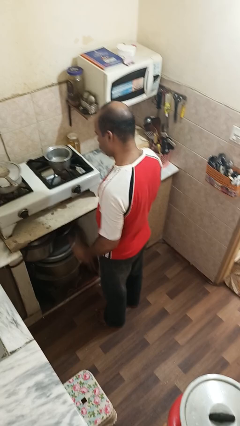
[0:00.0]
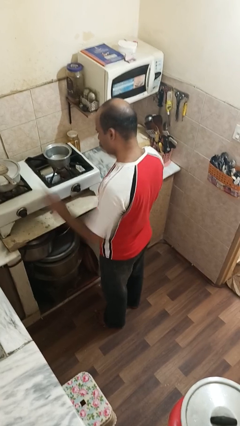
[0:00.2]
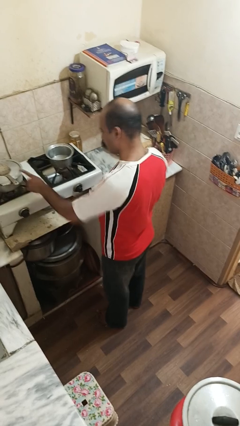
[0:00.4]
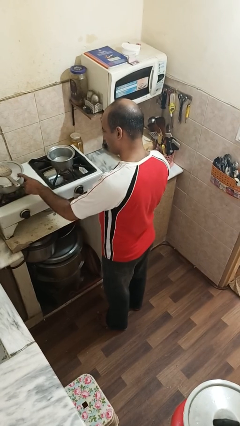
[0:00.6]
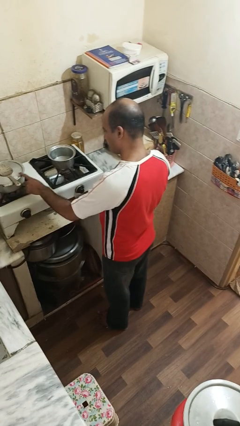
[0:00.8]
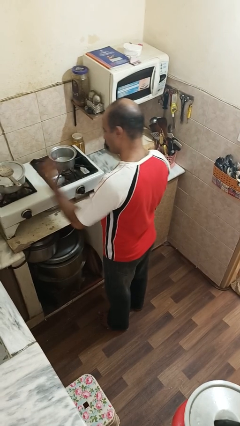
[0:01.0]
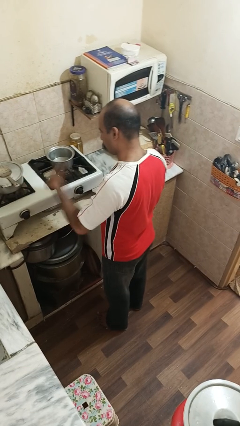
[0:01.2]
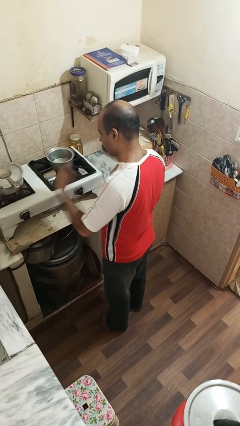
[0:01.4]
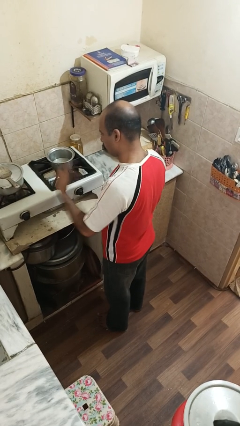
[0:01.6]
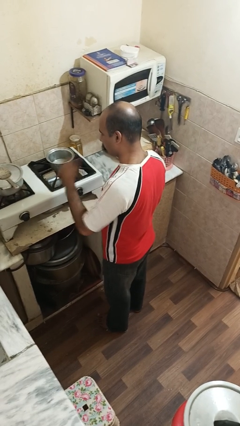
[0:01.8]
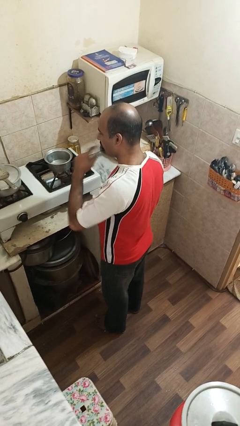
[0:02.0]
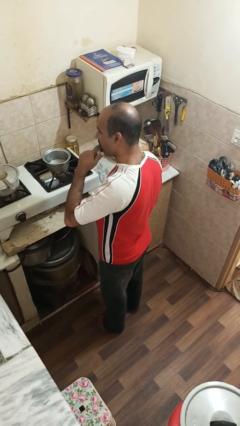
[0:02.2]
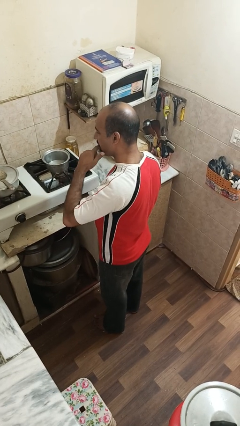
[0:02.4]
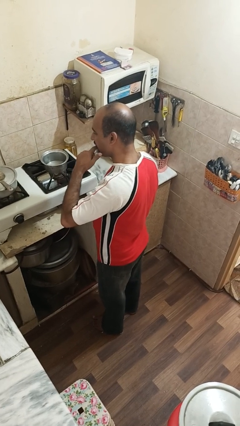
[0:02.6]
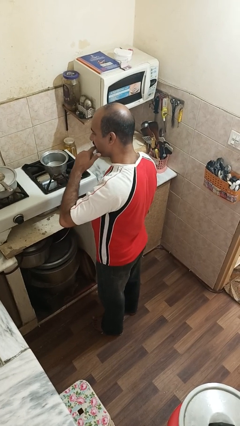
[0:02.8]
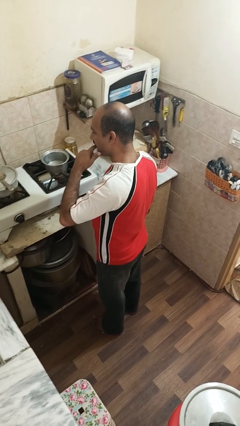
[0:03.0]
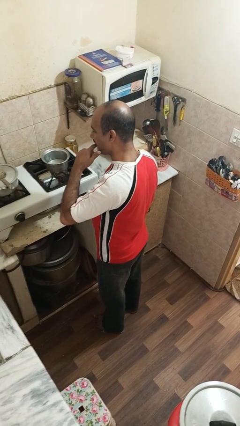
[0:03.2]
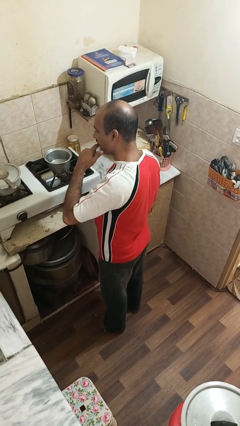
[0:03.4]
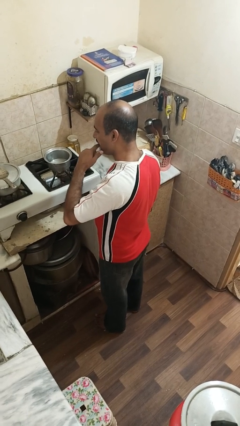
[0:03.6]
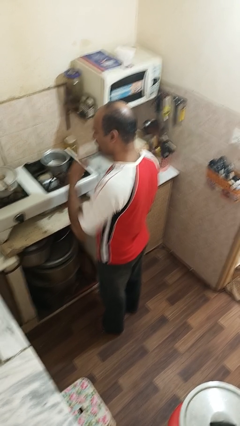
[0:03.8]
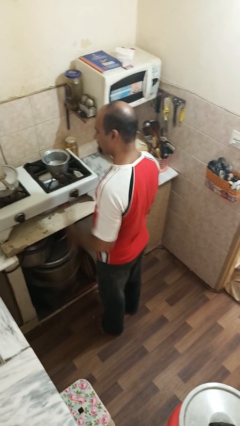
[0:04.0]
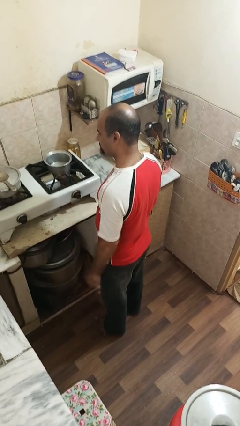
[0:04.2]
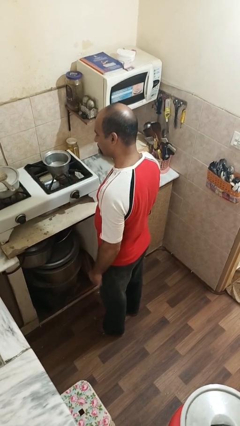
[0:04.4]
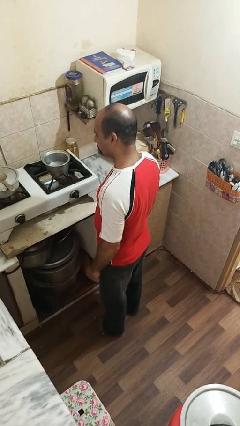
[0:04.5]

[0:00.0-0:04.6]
person burns hand

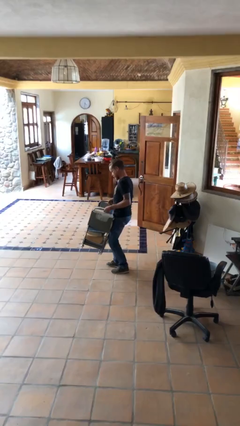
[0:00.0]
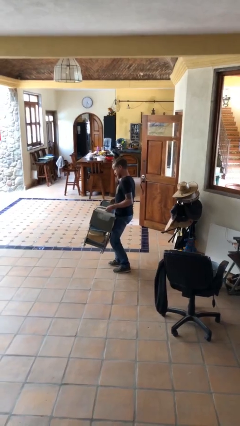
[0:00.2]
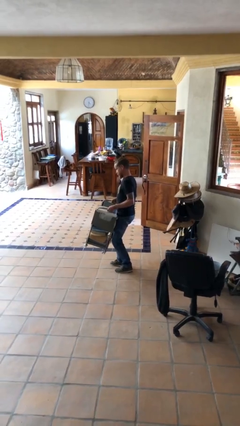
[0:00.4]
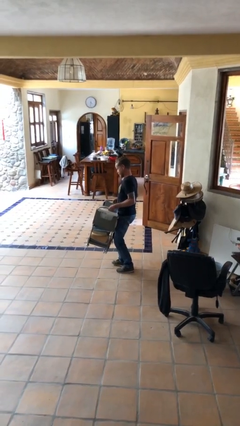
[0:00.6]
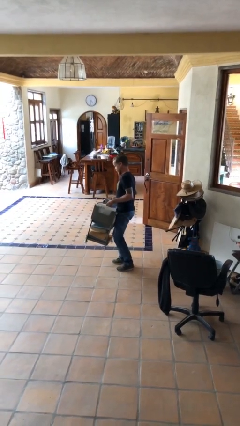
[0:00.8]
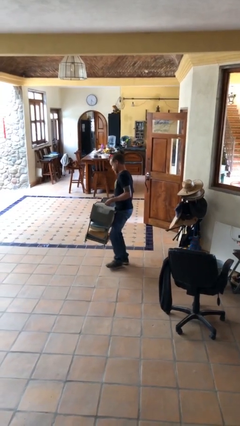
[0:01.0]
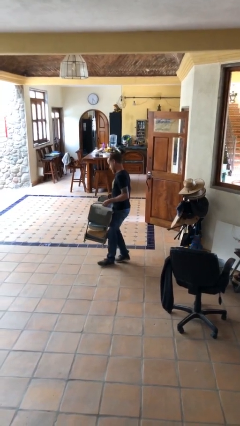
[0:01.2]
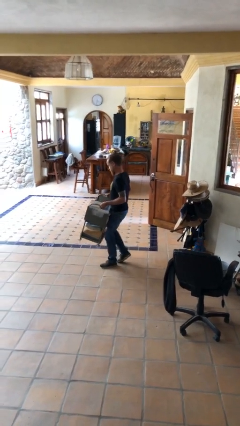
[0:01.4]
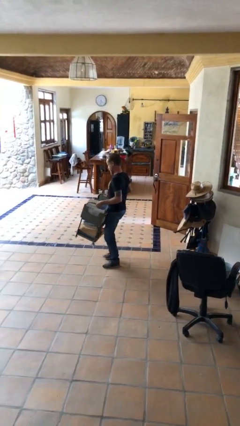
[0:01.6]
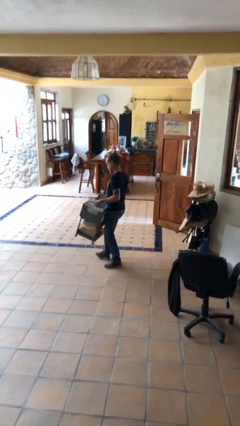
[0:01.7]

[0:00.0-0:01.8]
person carries heavy object

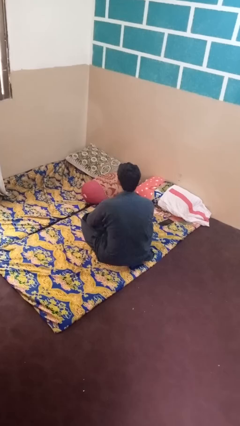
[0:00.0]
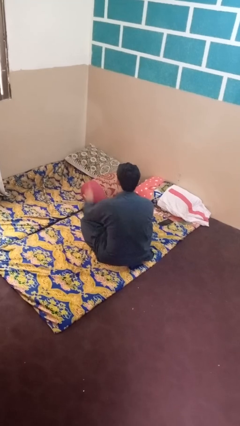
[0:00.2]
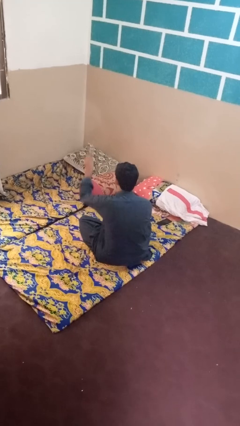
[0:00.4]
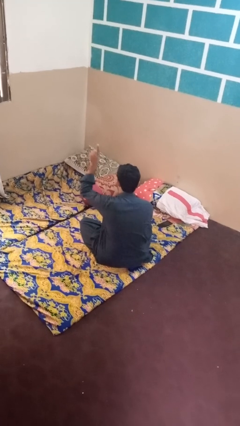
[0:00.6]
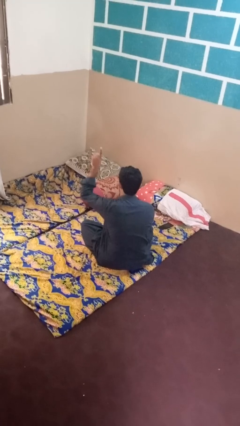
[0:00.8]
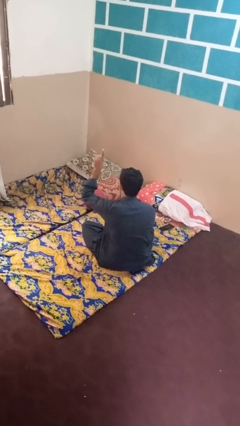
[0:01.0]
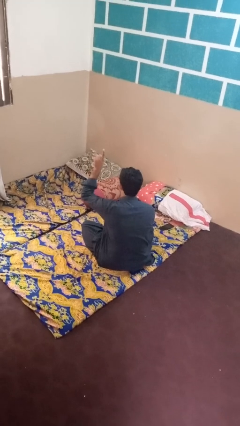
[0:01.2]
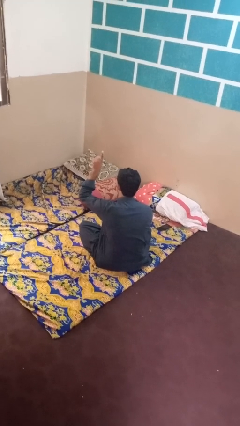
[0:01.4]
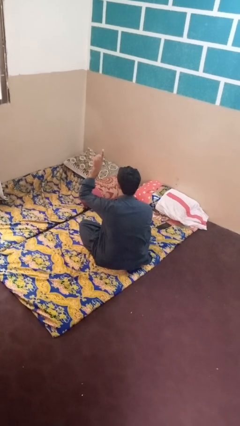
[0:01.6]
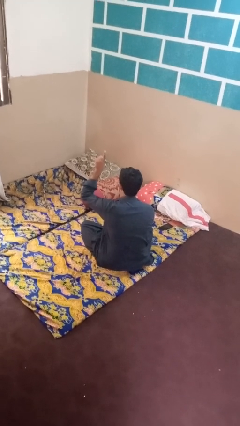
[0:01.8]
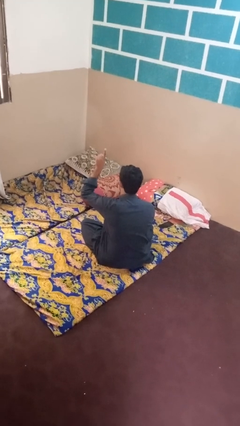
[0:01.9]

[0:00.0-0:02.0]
person gestures hang loose

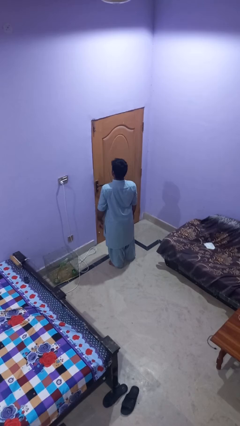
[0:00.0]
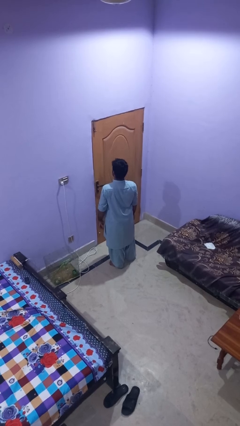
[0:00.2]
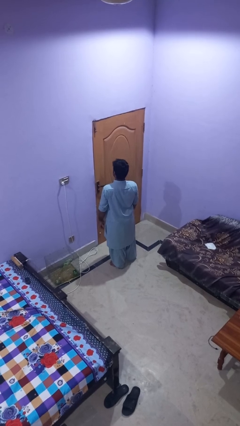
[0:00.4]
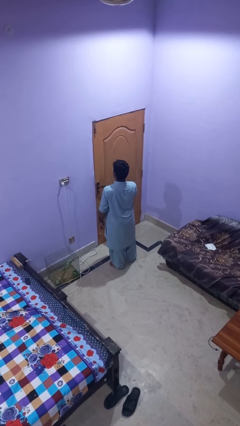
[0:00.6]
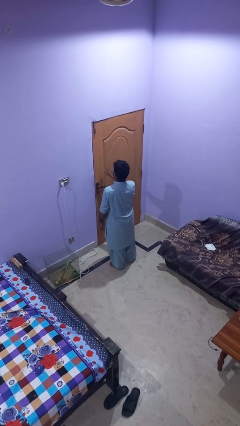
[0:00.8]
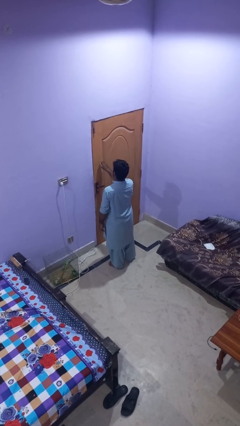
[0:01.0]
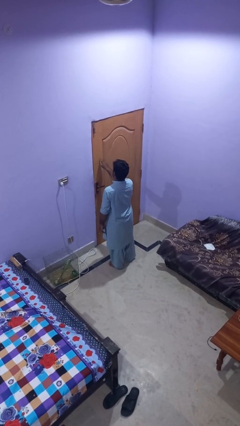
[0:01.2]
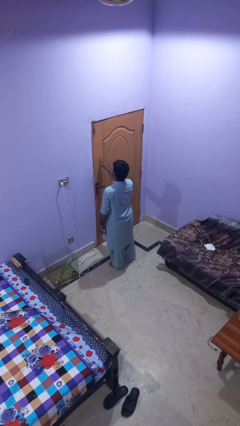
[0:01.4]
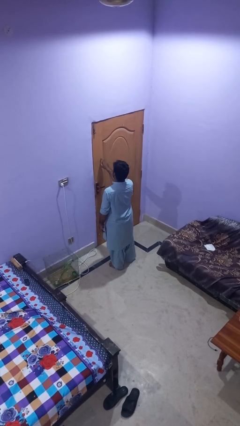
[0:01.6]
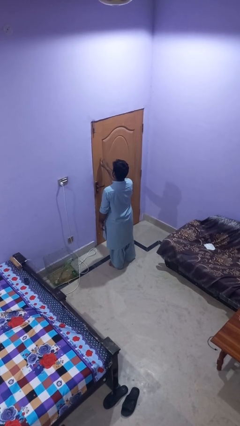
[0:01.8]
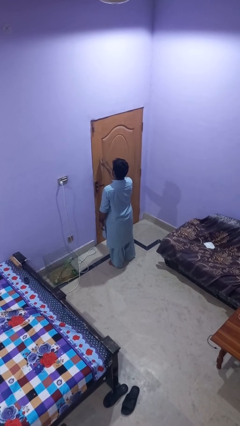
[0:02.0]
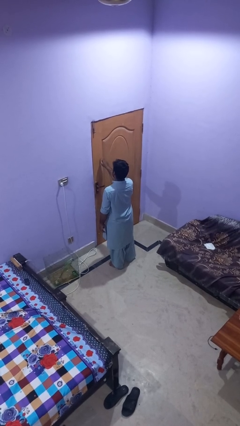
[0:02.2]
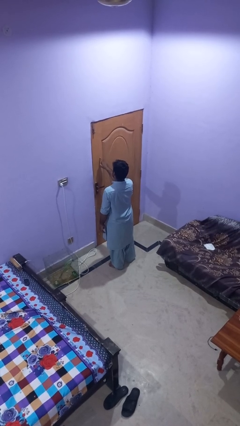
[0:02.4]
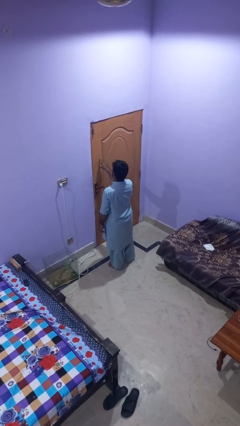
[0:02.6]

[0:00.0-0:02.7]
person taps object with finger

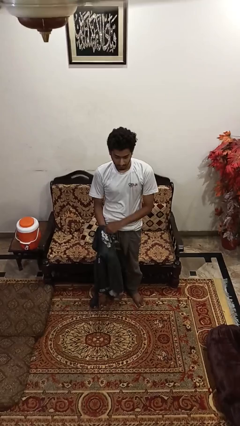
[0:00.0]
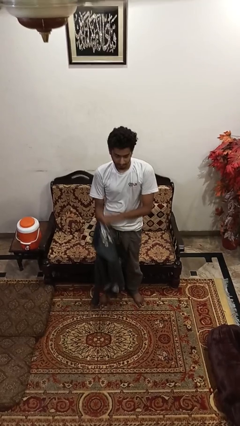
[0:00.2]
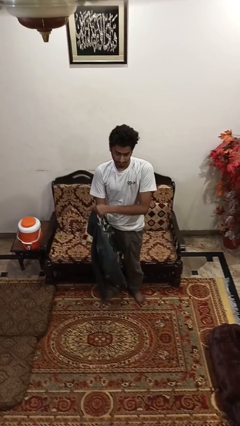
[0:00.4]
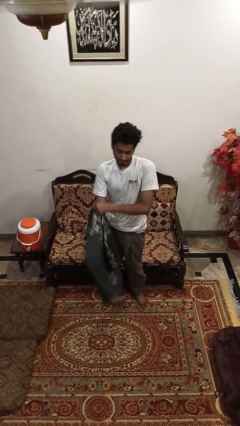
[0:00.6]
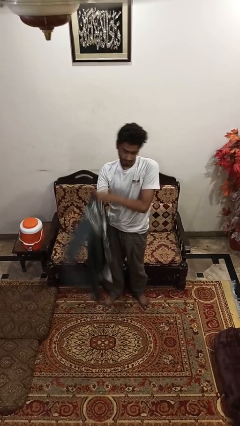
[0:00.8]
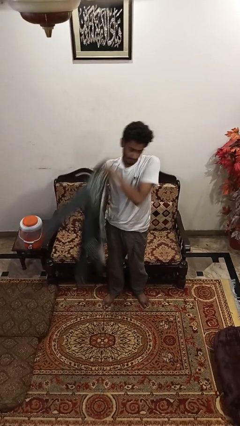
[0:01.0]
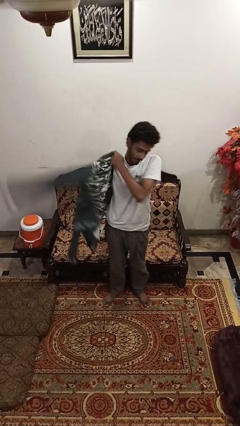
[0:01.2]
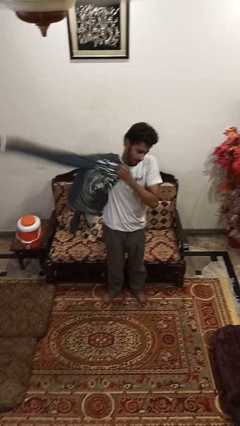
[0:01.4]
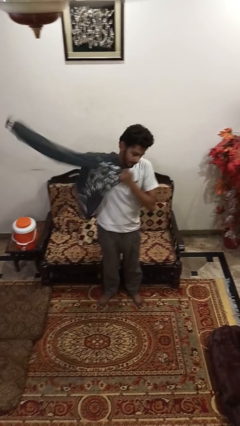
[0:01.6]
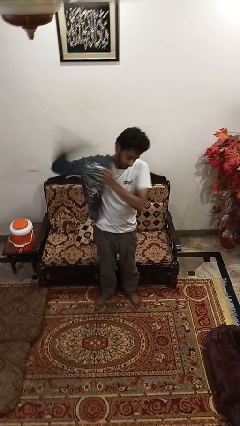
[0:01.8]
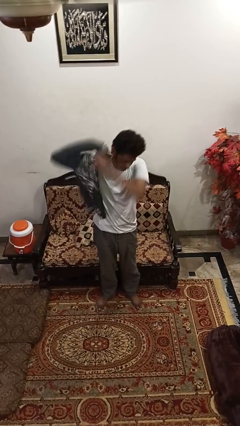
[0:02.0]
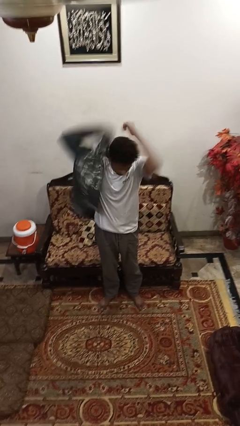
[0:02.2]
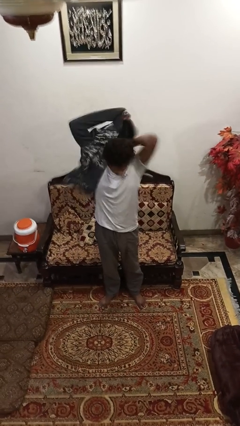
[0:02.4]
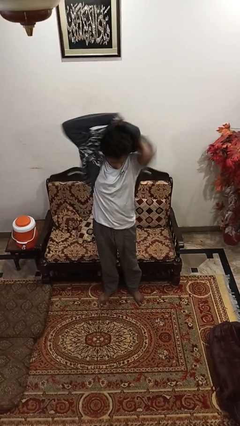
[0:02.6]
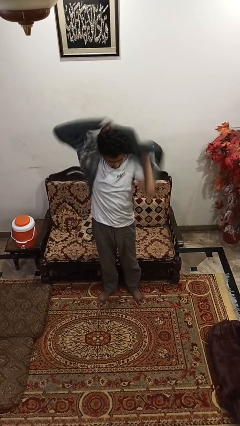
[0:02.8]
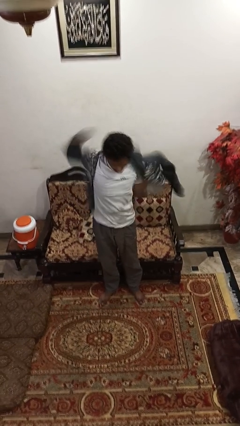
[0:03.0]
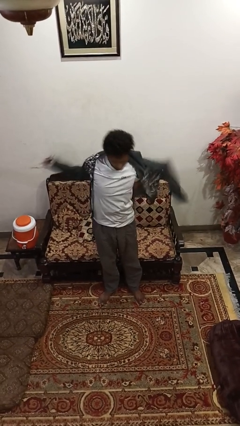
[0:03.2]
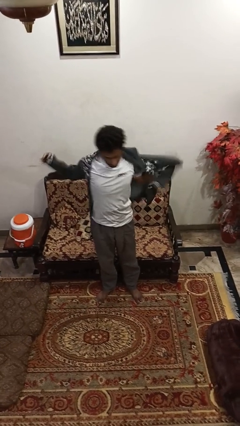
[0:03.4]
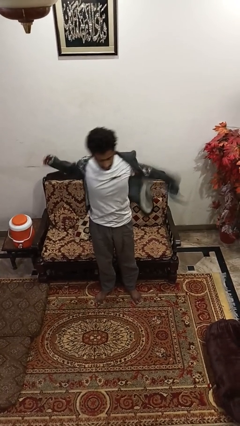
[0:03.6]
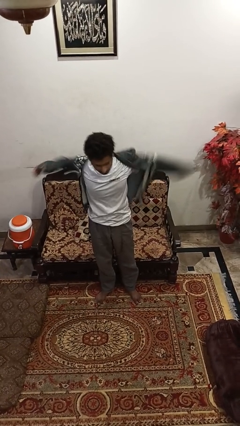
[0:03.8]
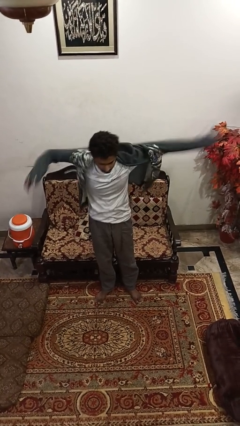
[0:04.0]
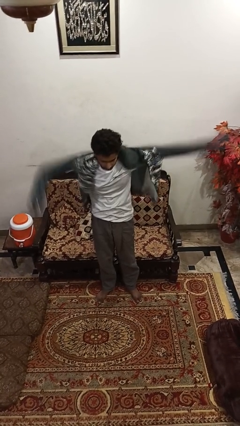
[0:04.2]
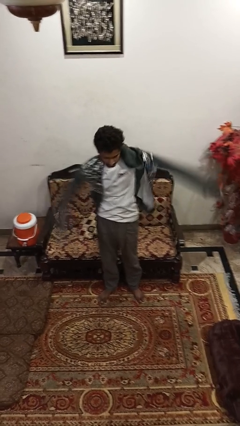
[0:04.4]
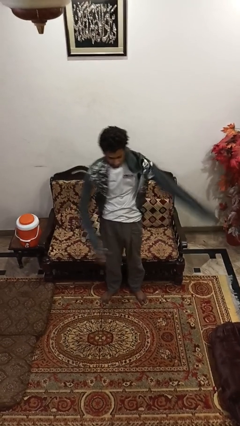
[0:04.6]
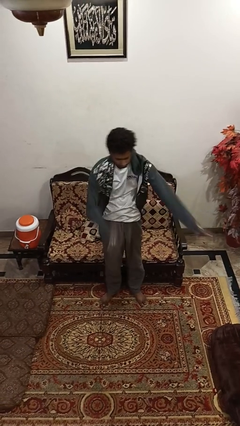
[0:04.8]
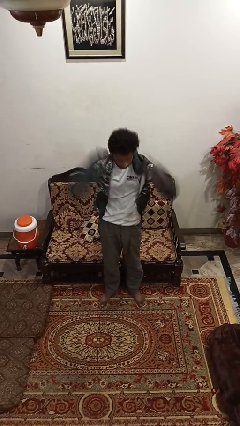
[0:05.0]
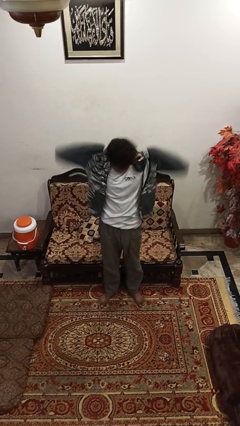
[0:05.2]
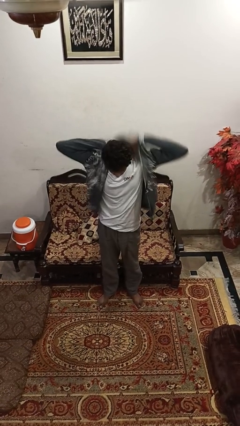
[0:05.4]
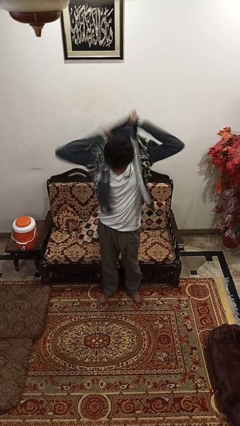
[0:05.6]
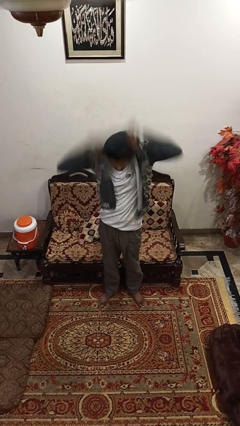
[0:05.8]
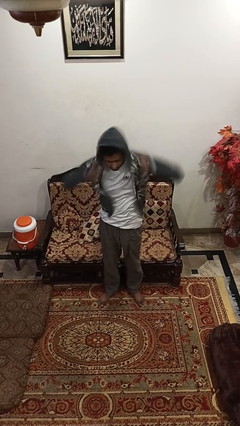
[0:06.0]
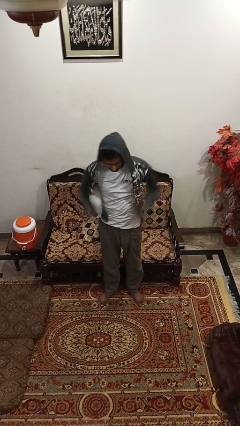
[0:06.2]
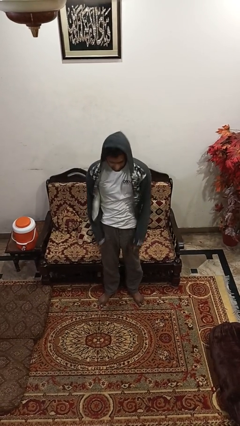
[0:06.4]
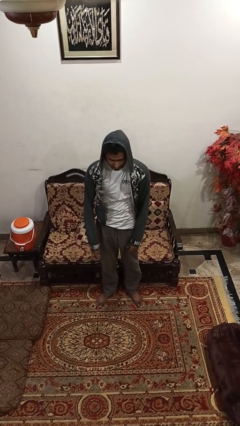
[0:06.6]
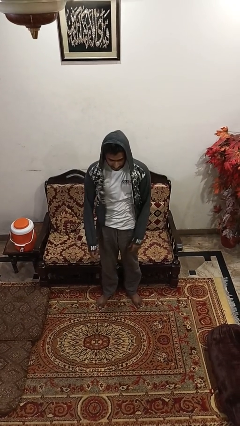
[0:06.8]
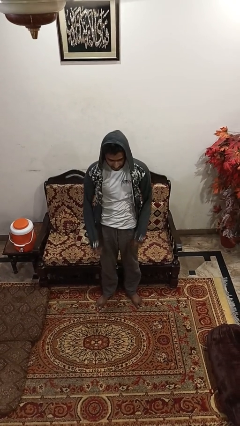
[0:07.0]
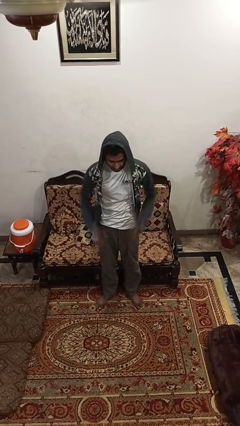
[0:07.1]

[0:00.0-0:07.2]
person puts on hoodie
